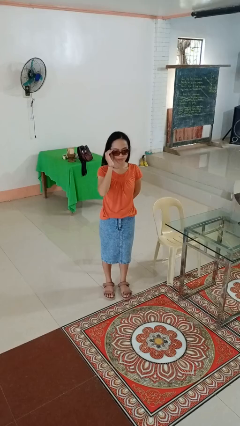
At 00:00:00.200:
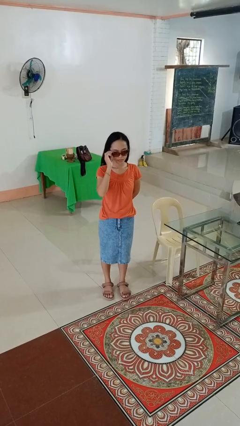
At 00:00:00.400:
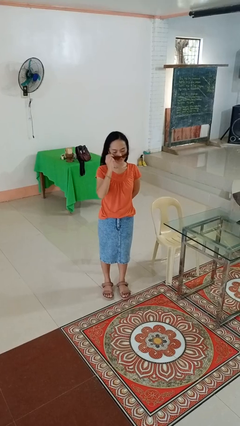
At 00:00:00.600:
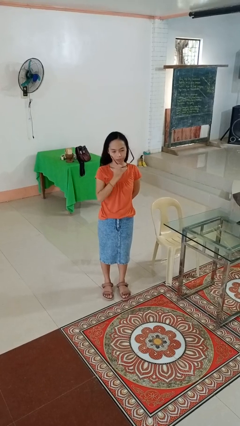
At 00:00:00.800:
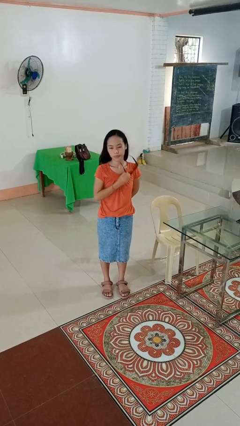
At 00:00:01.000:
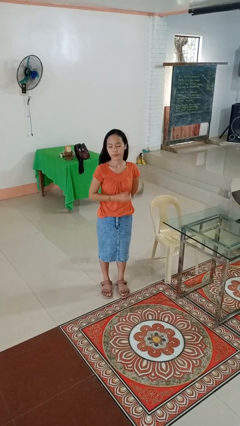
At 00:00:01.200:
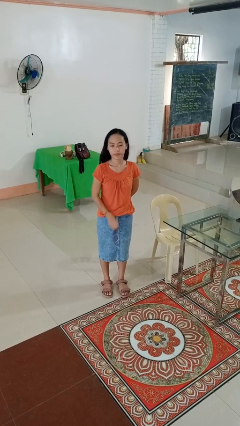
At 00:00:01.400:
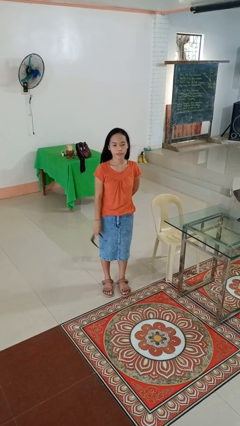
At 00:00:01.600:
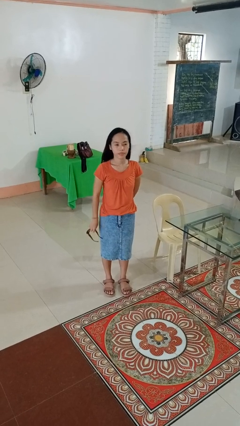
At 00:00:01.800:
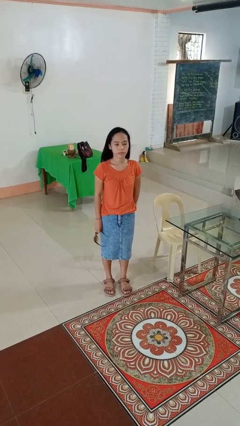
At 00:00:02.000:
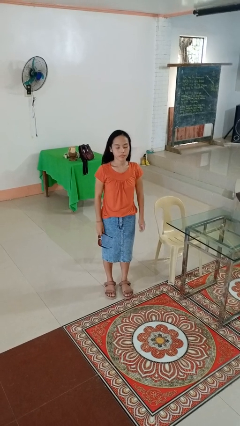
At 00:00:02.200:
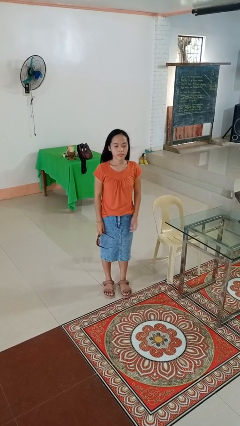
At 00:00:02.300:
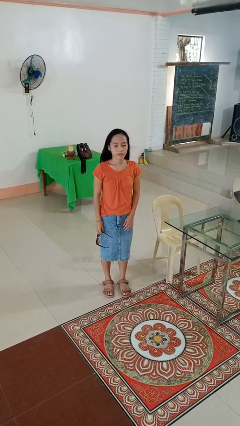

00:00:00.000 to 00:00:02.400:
person takes off sunglasses

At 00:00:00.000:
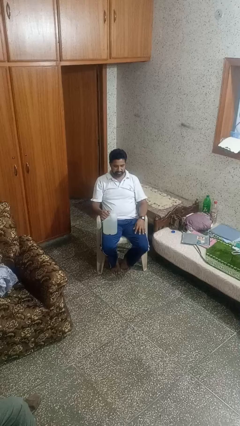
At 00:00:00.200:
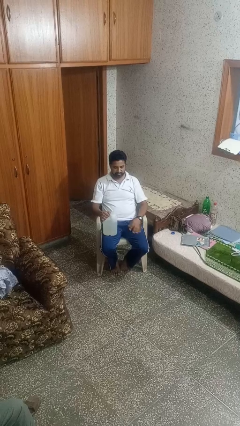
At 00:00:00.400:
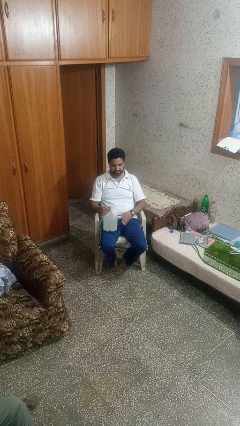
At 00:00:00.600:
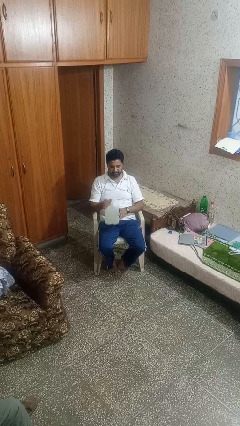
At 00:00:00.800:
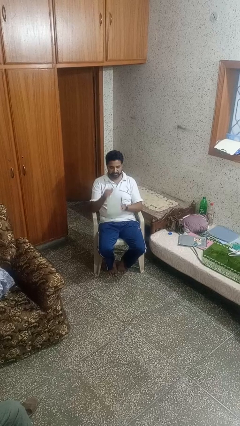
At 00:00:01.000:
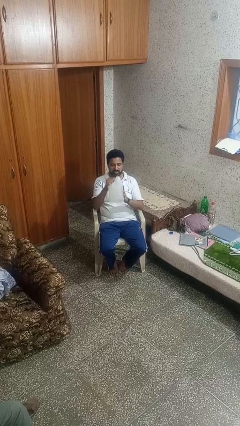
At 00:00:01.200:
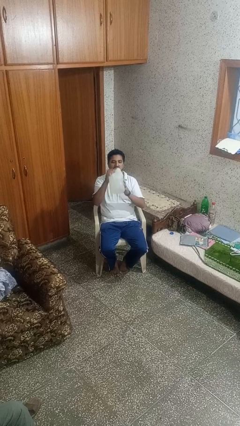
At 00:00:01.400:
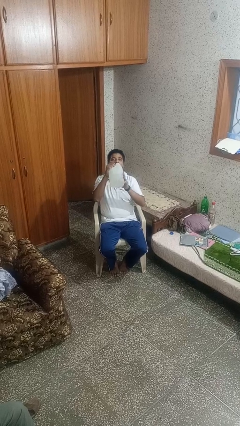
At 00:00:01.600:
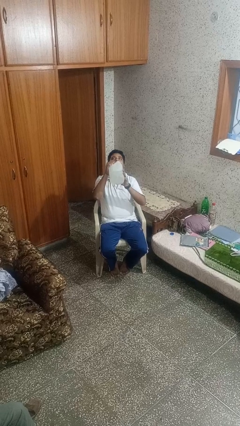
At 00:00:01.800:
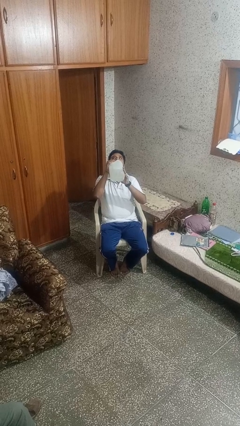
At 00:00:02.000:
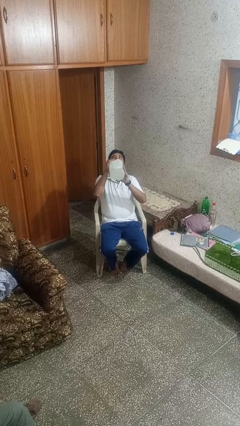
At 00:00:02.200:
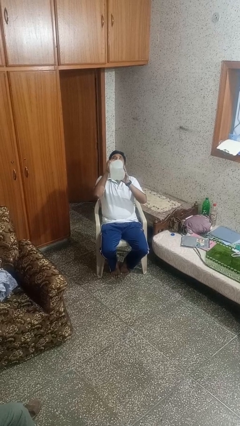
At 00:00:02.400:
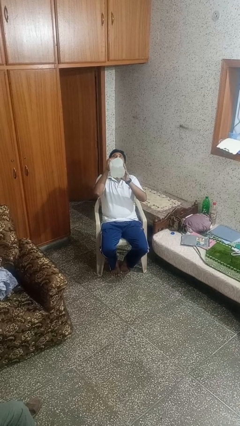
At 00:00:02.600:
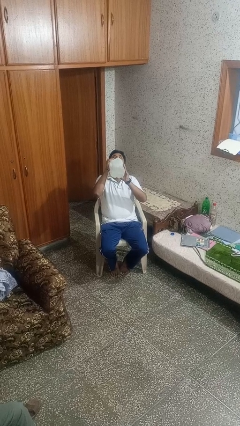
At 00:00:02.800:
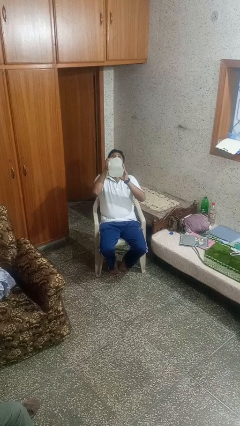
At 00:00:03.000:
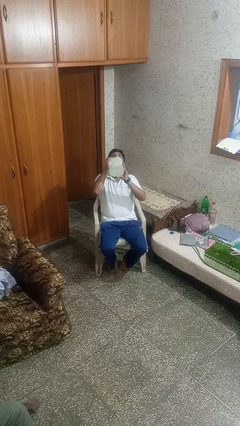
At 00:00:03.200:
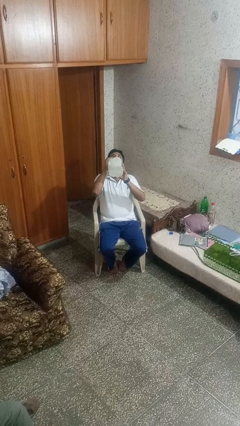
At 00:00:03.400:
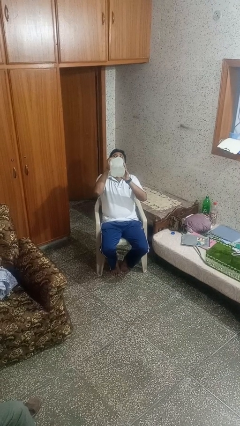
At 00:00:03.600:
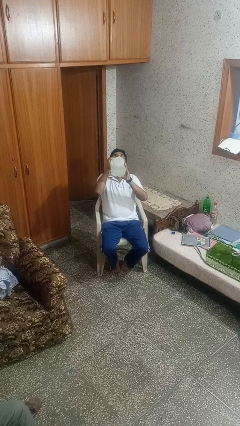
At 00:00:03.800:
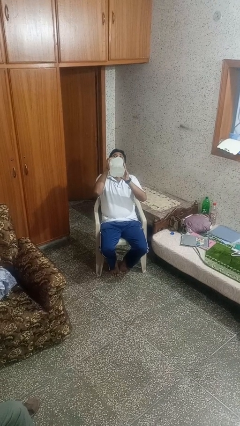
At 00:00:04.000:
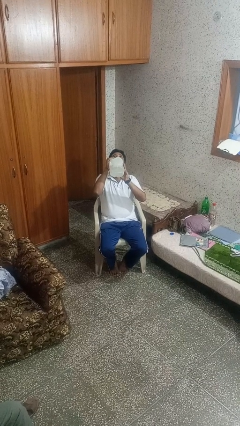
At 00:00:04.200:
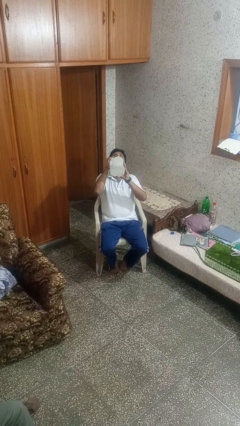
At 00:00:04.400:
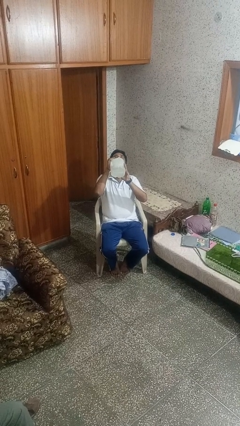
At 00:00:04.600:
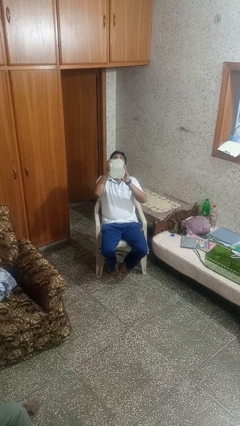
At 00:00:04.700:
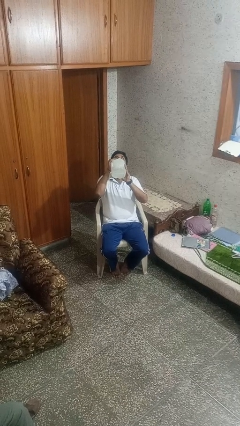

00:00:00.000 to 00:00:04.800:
person drinks from bottle

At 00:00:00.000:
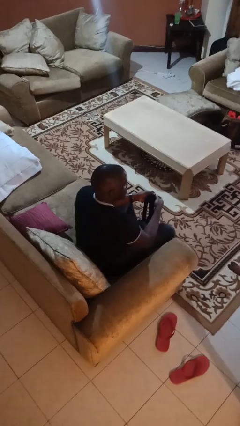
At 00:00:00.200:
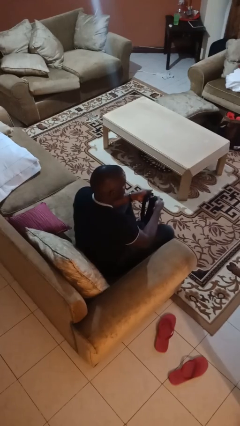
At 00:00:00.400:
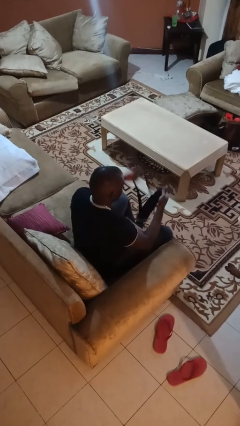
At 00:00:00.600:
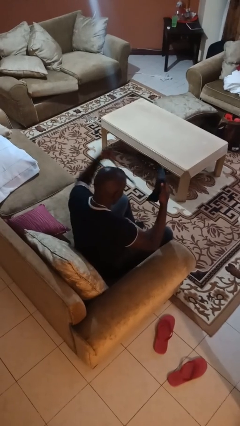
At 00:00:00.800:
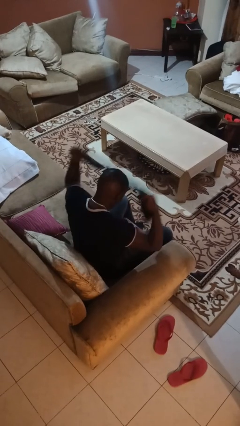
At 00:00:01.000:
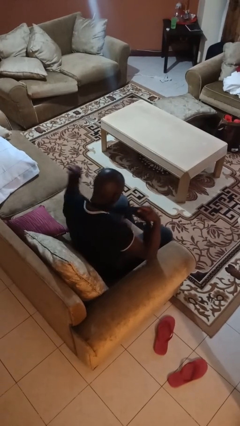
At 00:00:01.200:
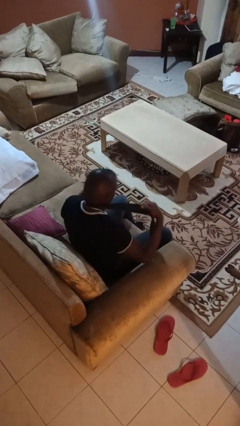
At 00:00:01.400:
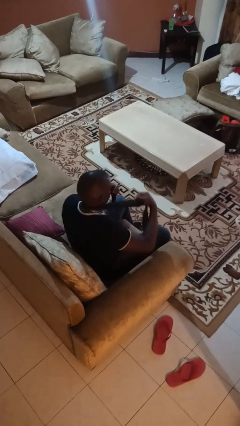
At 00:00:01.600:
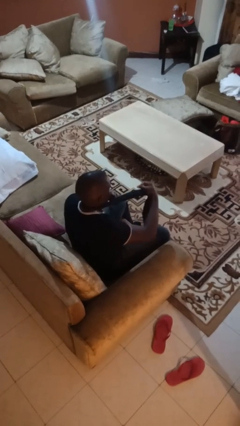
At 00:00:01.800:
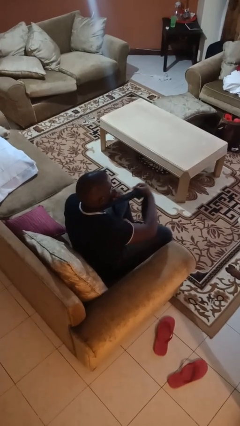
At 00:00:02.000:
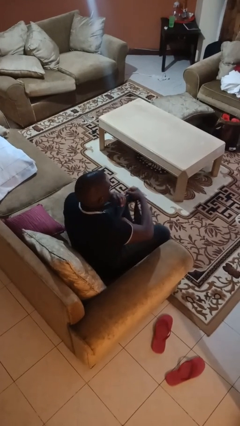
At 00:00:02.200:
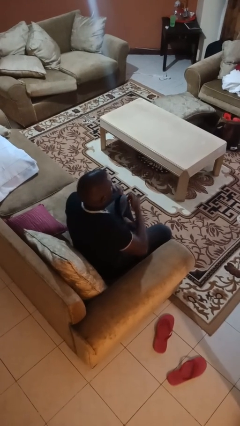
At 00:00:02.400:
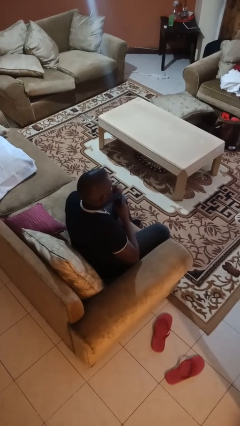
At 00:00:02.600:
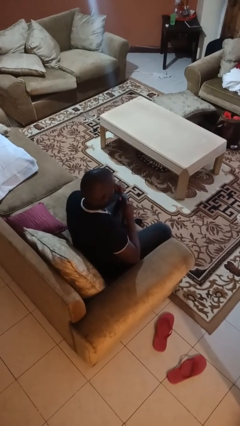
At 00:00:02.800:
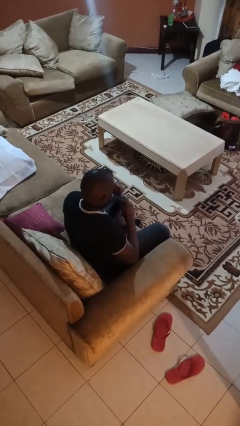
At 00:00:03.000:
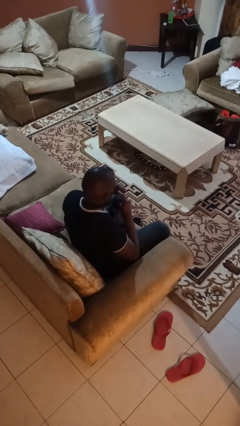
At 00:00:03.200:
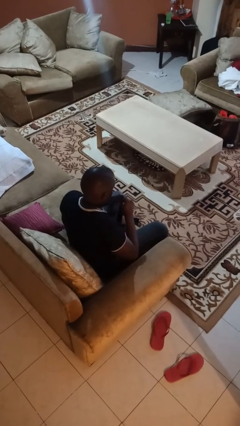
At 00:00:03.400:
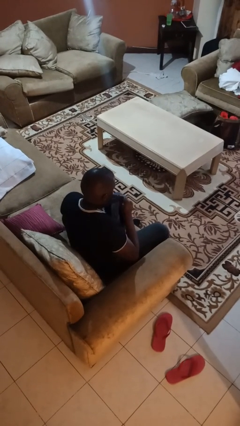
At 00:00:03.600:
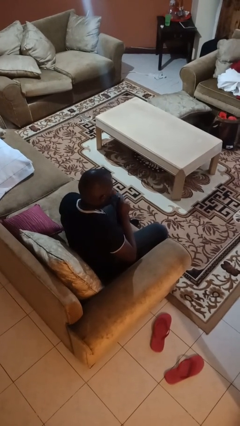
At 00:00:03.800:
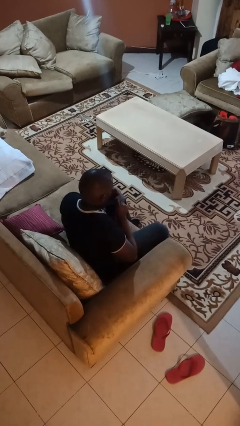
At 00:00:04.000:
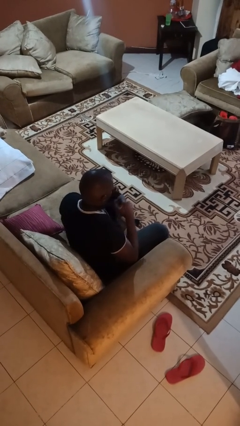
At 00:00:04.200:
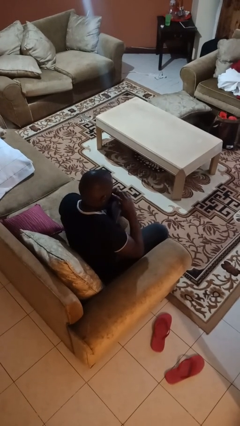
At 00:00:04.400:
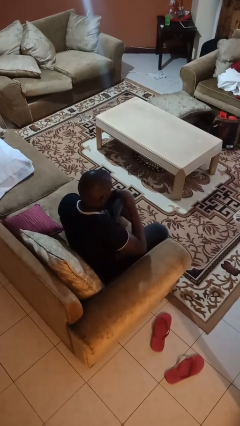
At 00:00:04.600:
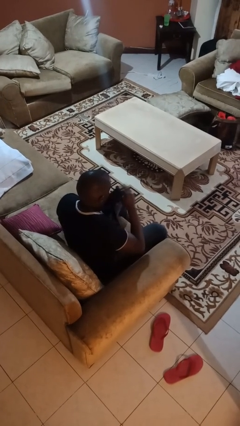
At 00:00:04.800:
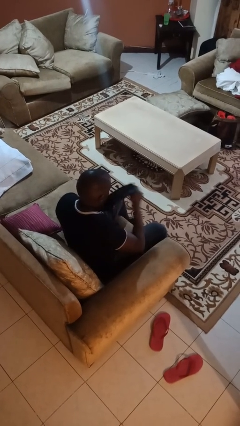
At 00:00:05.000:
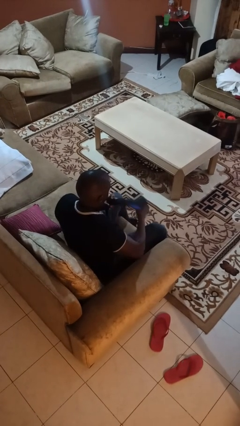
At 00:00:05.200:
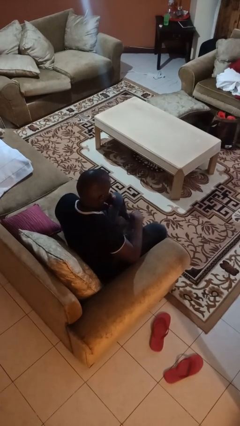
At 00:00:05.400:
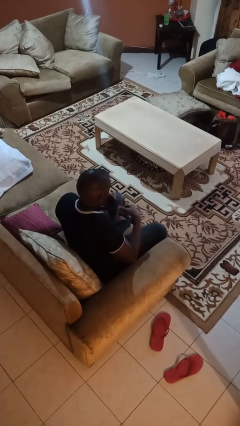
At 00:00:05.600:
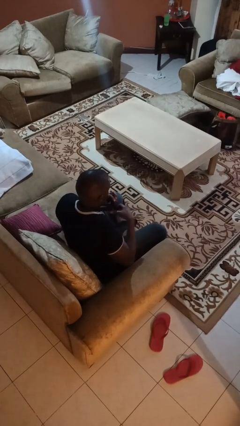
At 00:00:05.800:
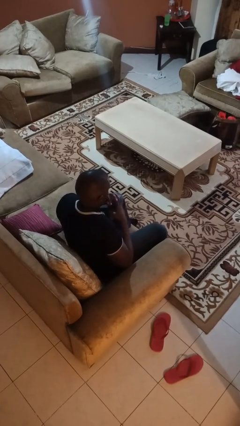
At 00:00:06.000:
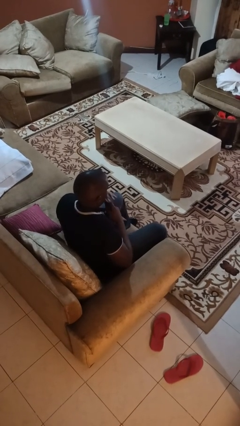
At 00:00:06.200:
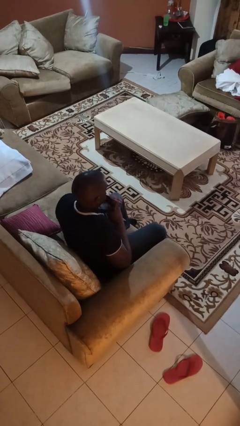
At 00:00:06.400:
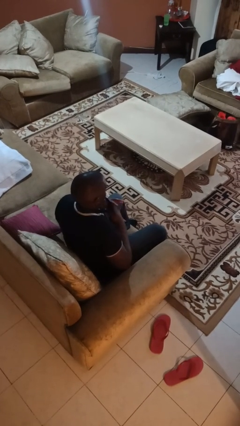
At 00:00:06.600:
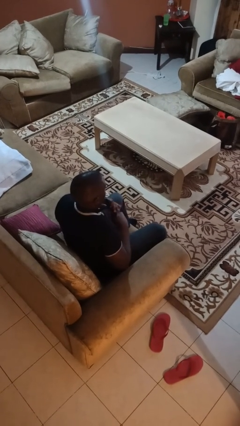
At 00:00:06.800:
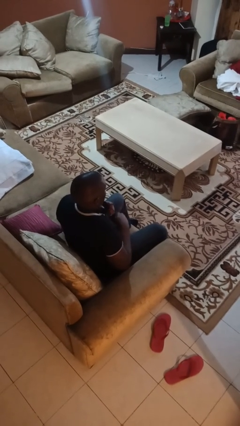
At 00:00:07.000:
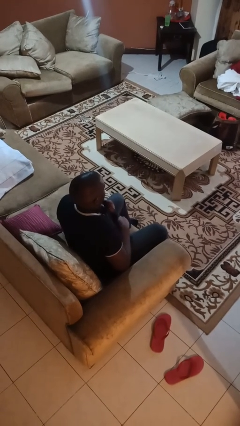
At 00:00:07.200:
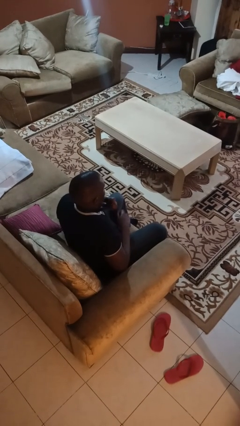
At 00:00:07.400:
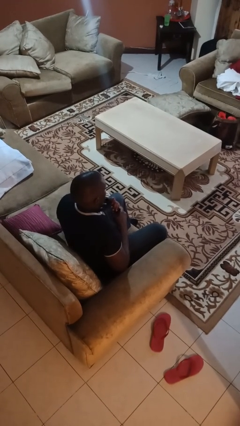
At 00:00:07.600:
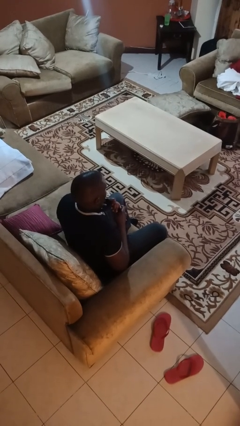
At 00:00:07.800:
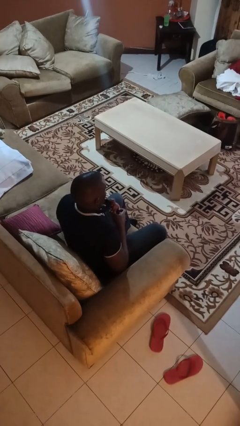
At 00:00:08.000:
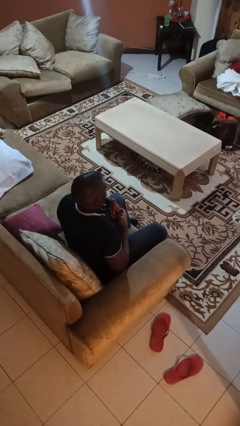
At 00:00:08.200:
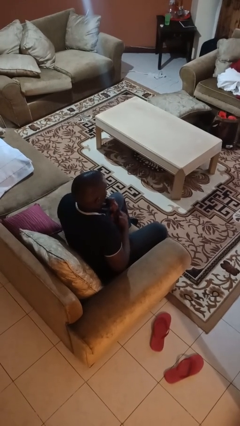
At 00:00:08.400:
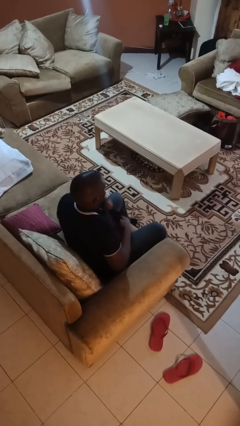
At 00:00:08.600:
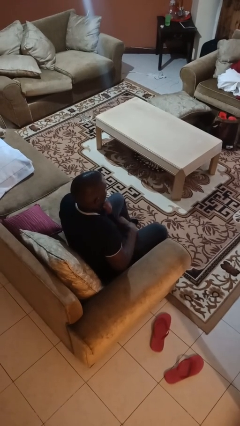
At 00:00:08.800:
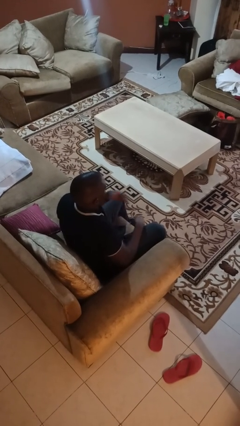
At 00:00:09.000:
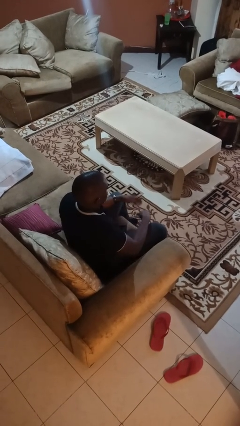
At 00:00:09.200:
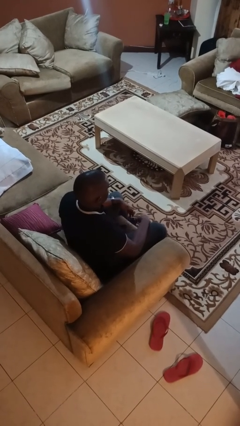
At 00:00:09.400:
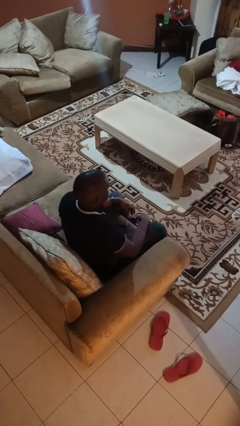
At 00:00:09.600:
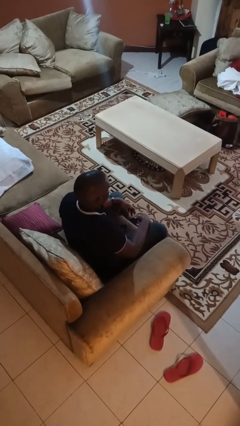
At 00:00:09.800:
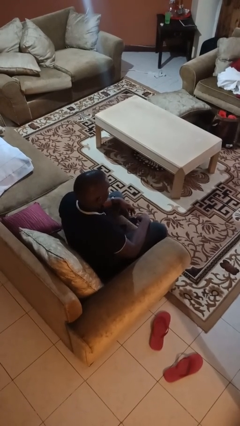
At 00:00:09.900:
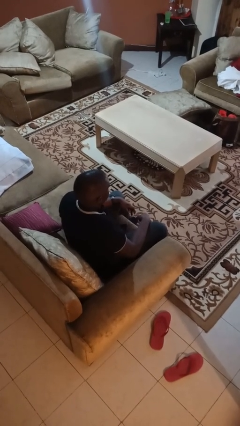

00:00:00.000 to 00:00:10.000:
person puts on necktie

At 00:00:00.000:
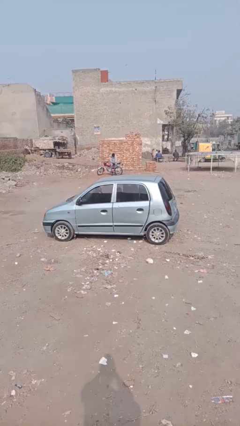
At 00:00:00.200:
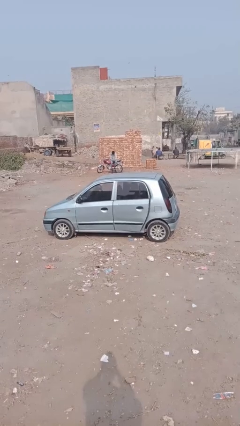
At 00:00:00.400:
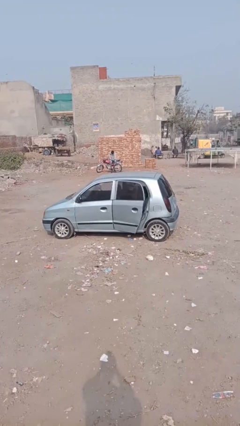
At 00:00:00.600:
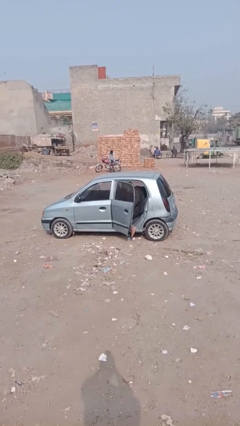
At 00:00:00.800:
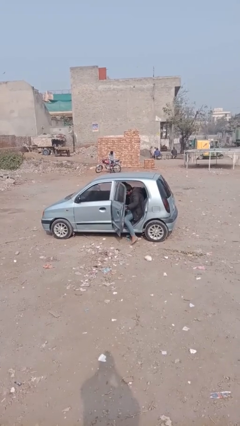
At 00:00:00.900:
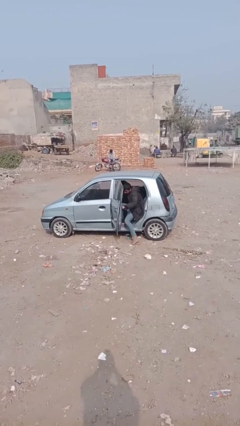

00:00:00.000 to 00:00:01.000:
car drops off person
